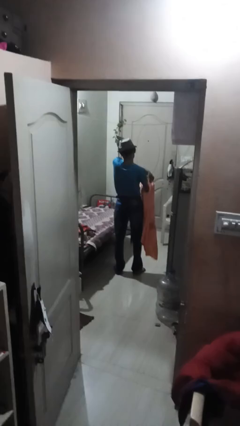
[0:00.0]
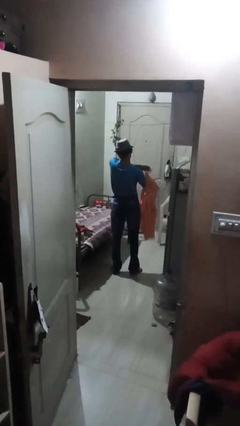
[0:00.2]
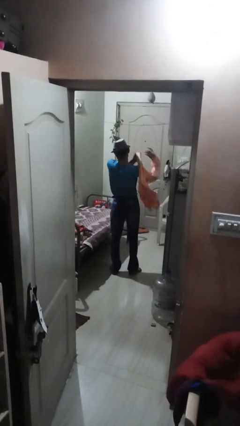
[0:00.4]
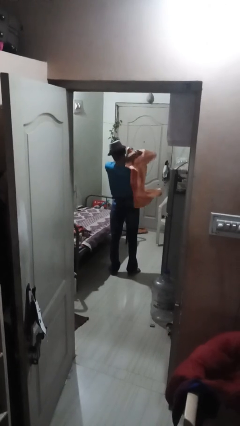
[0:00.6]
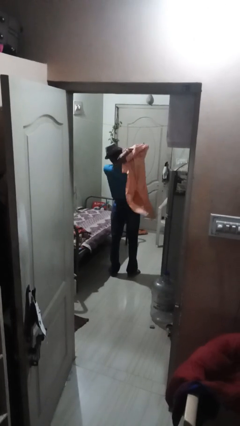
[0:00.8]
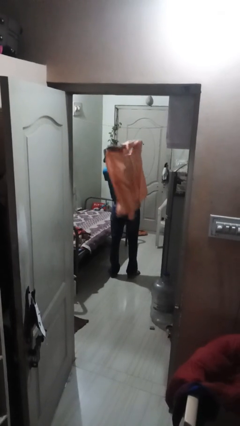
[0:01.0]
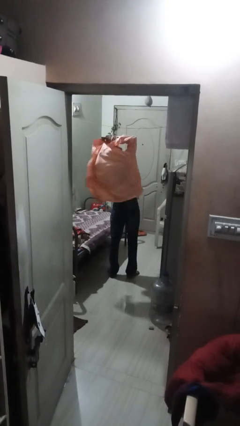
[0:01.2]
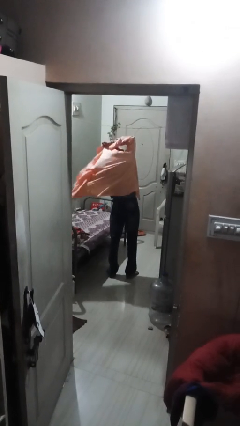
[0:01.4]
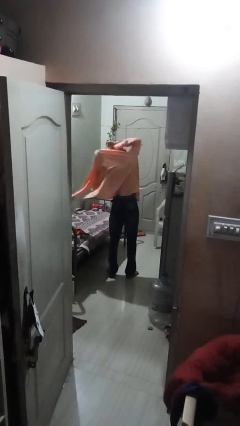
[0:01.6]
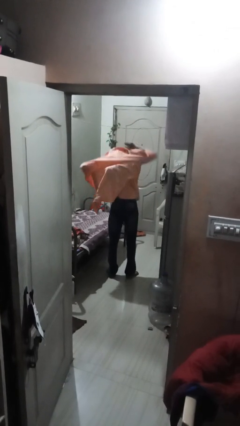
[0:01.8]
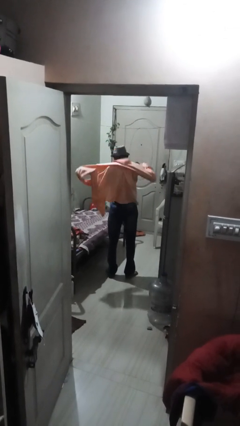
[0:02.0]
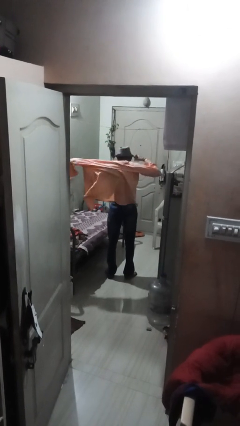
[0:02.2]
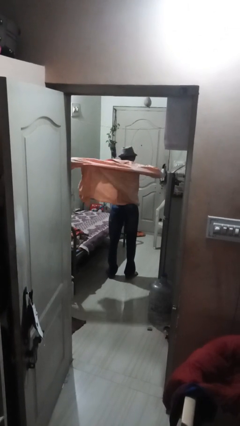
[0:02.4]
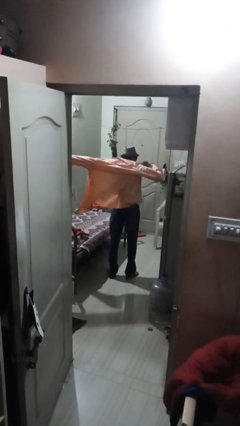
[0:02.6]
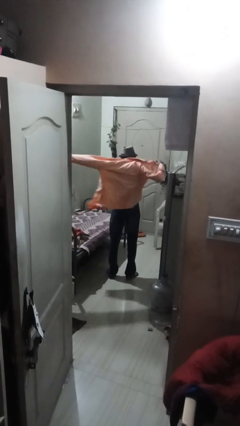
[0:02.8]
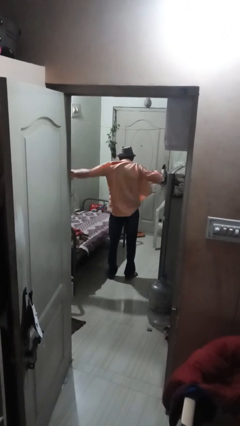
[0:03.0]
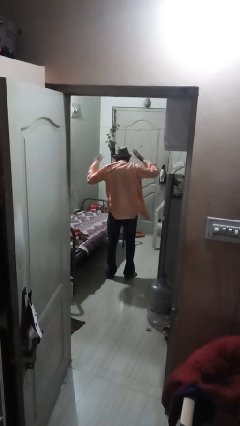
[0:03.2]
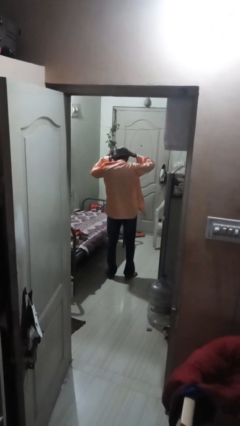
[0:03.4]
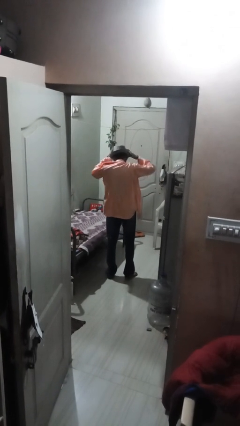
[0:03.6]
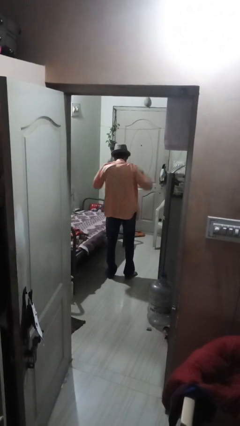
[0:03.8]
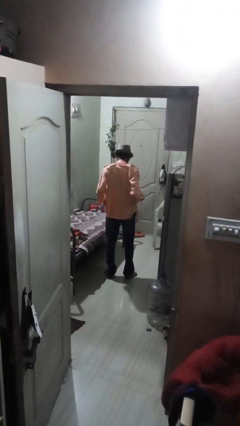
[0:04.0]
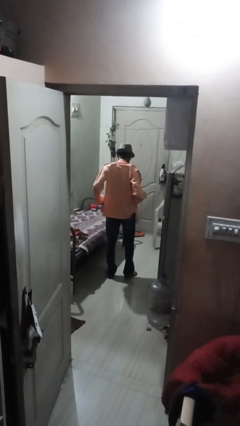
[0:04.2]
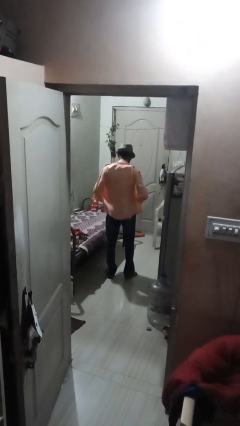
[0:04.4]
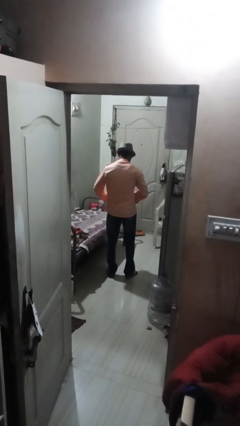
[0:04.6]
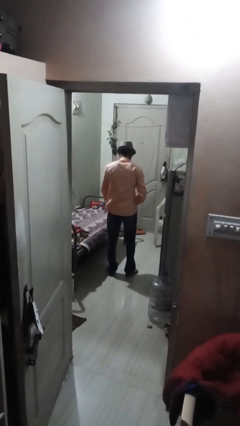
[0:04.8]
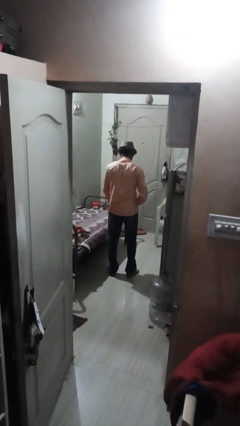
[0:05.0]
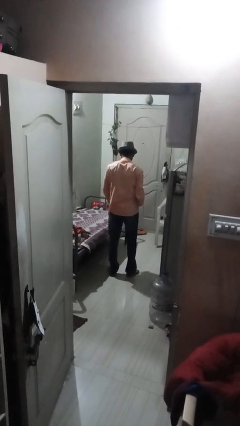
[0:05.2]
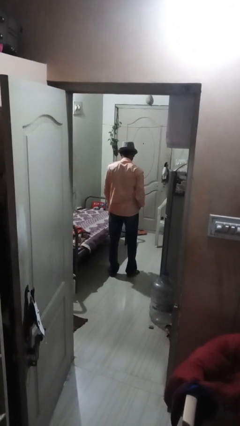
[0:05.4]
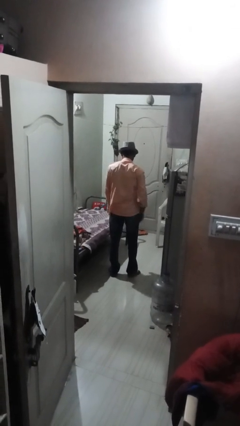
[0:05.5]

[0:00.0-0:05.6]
person puts on shirt

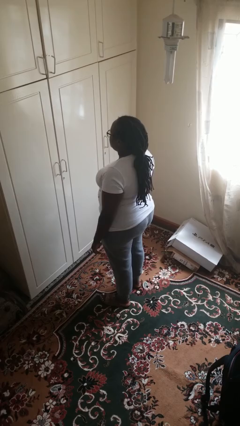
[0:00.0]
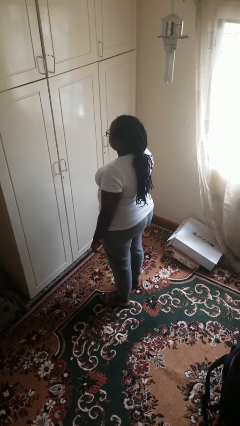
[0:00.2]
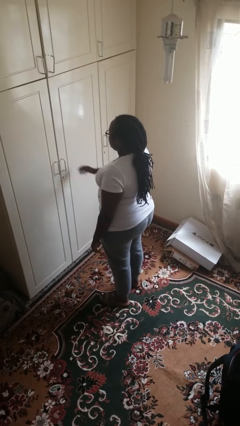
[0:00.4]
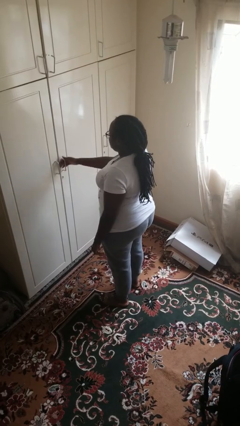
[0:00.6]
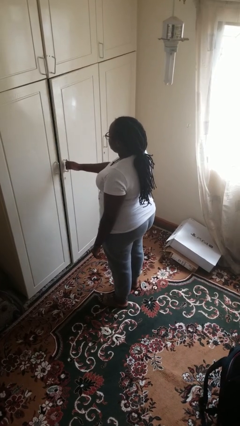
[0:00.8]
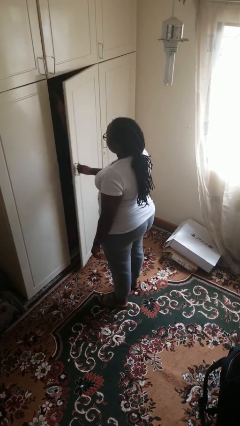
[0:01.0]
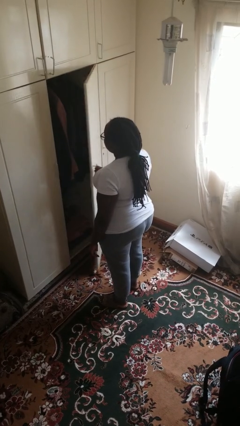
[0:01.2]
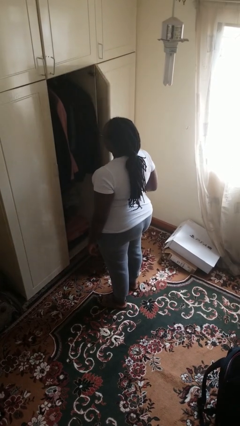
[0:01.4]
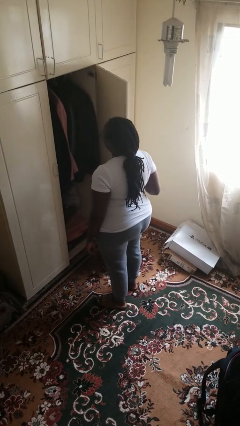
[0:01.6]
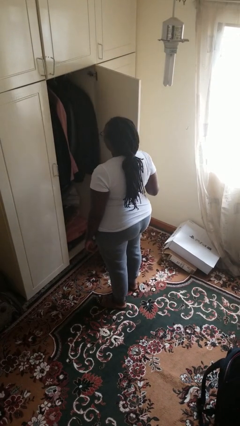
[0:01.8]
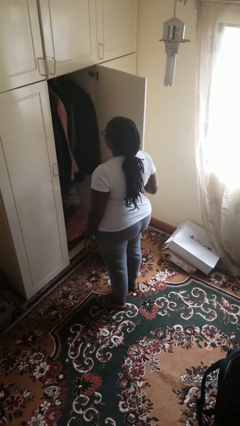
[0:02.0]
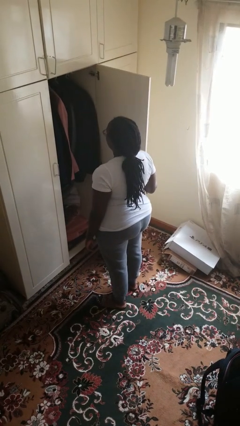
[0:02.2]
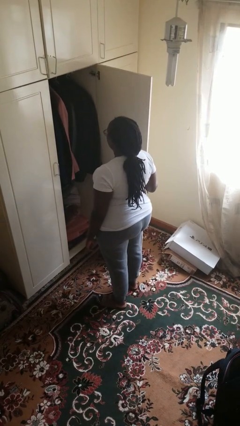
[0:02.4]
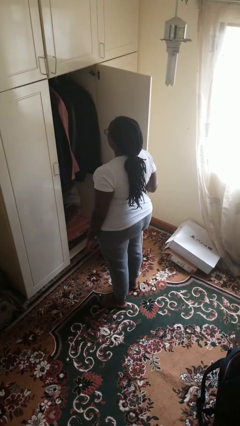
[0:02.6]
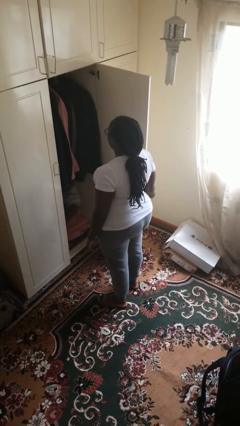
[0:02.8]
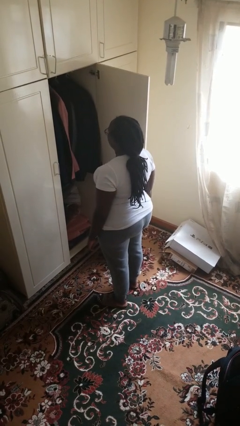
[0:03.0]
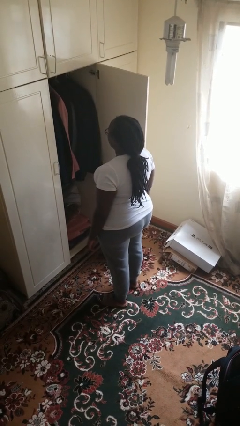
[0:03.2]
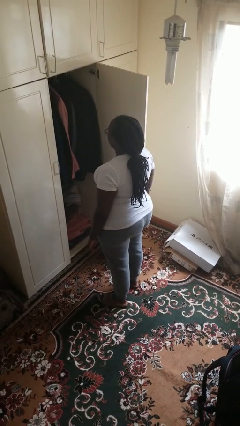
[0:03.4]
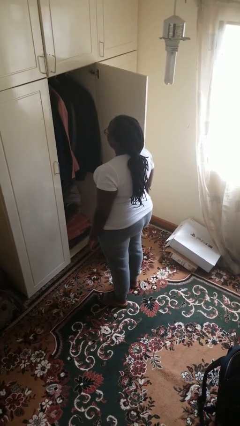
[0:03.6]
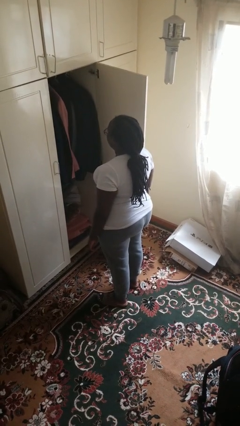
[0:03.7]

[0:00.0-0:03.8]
person opens closet door

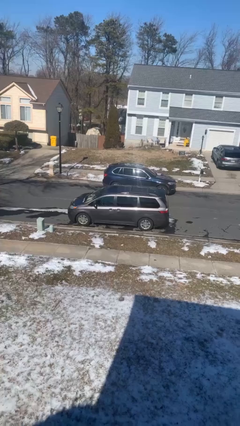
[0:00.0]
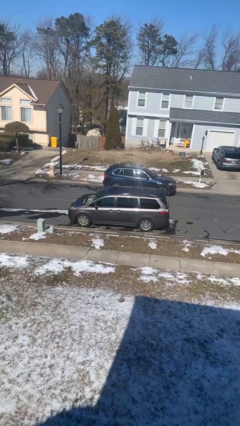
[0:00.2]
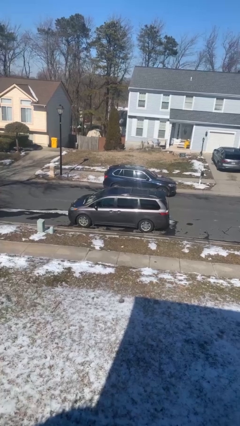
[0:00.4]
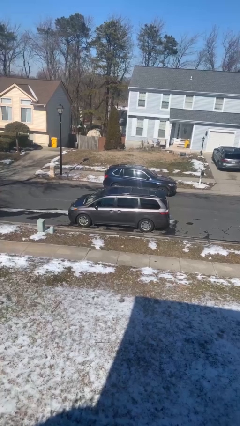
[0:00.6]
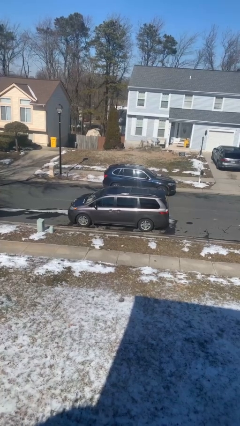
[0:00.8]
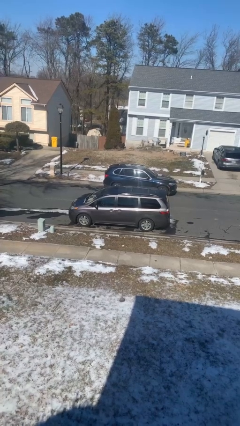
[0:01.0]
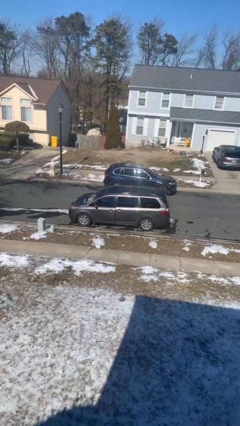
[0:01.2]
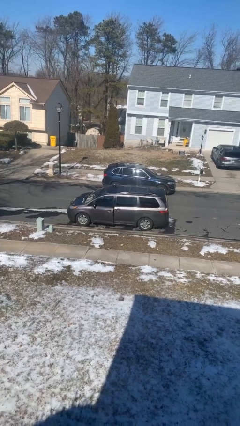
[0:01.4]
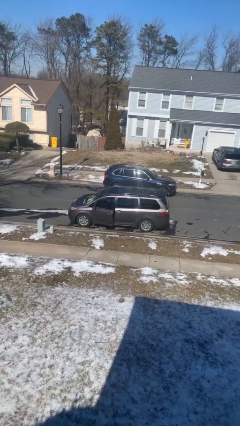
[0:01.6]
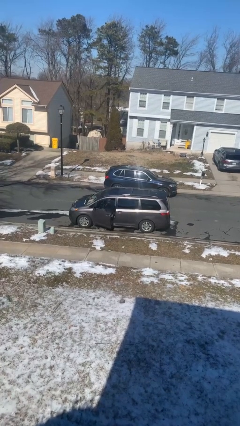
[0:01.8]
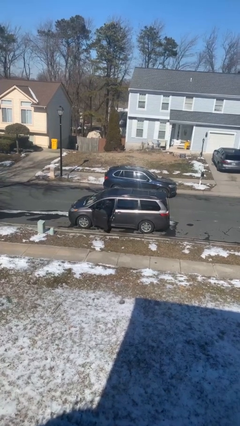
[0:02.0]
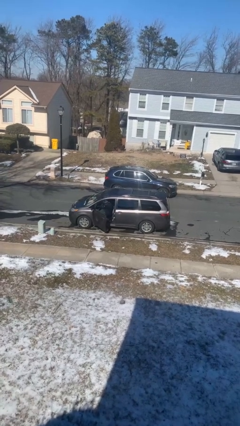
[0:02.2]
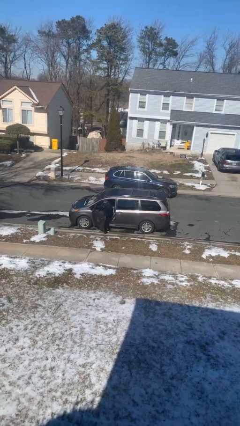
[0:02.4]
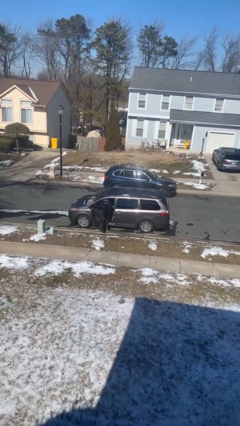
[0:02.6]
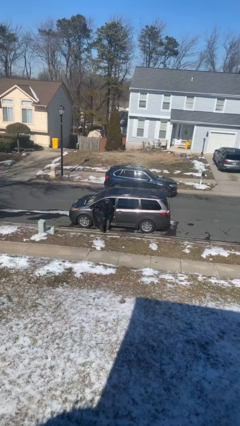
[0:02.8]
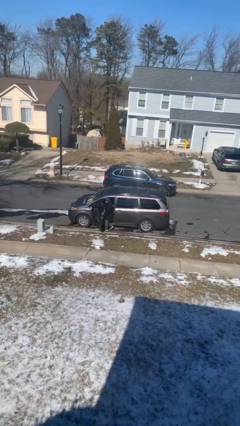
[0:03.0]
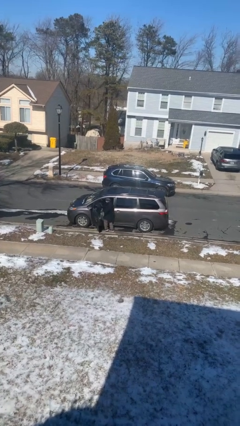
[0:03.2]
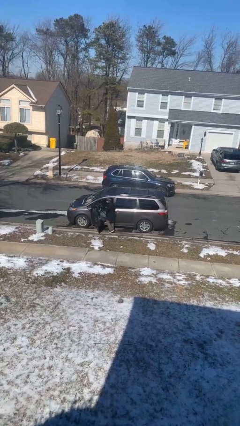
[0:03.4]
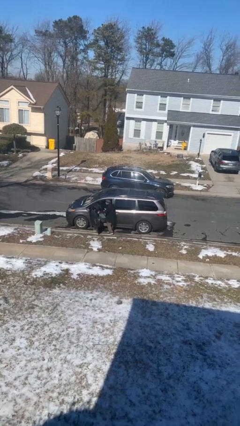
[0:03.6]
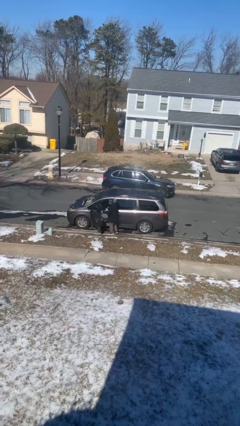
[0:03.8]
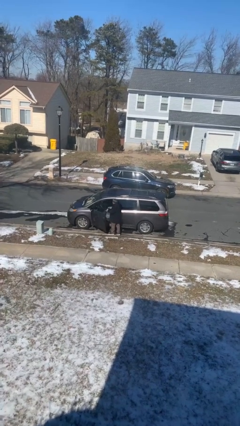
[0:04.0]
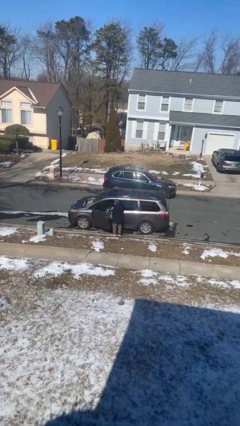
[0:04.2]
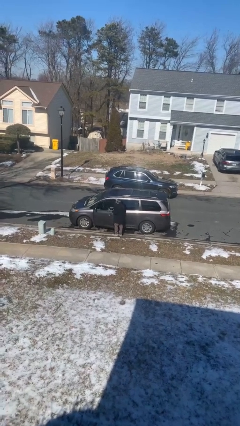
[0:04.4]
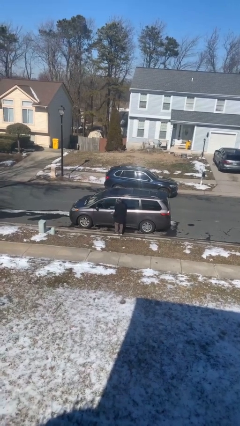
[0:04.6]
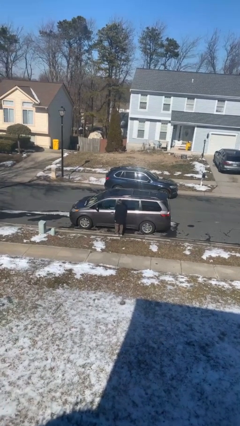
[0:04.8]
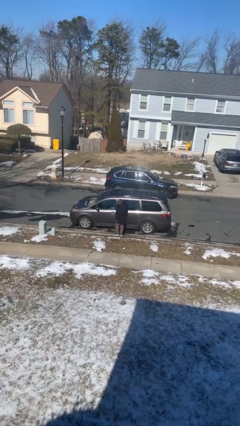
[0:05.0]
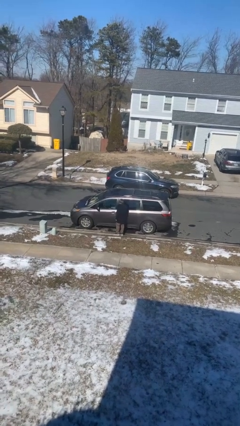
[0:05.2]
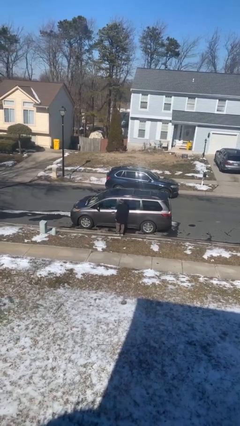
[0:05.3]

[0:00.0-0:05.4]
car drops off person

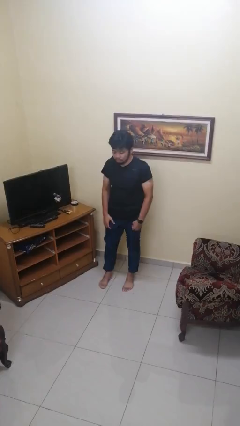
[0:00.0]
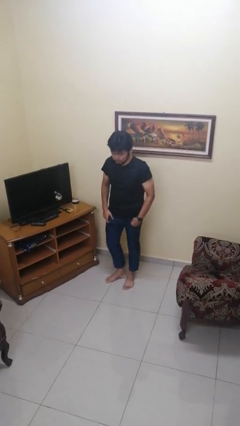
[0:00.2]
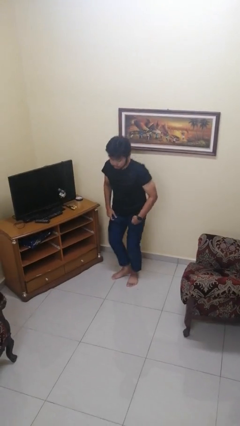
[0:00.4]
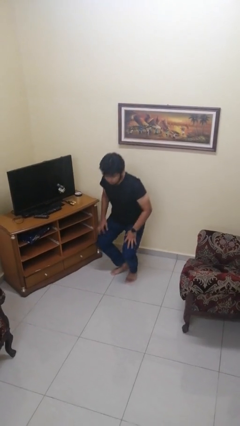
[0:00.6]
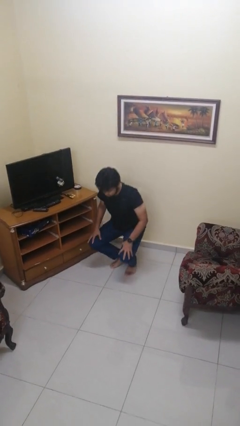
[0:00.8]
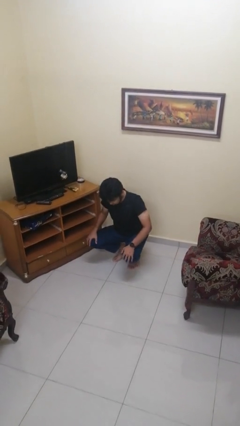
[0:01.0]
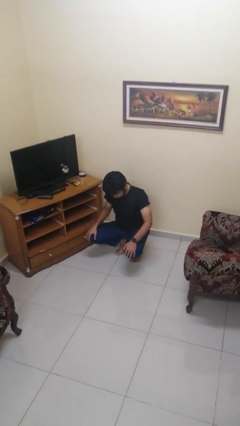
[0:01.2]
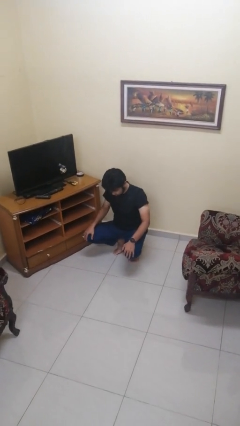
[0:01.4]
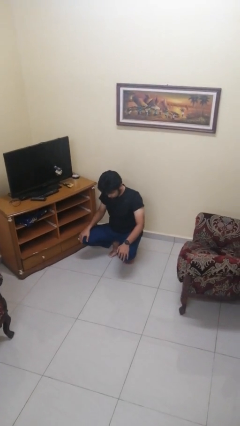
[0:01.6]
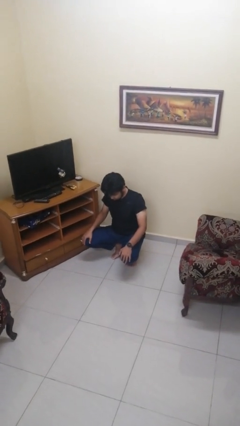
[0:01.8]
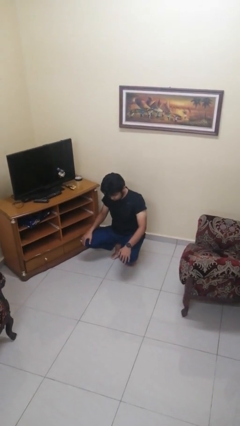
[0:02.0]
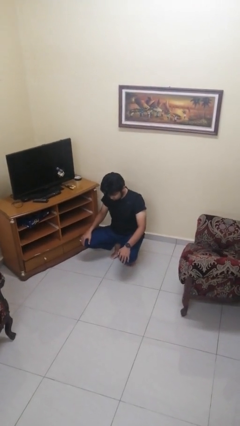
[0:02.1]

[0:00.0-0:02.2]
person squats

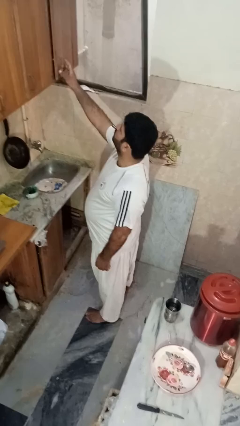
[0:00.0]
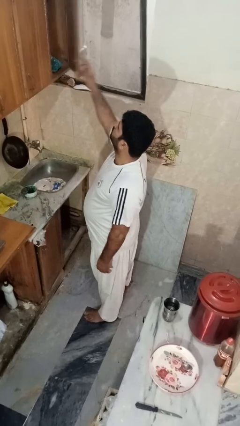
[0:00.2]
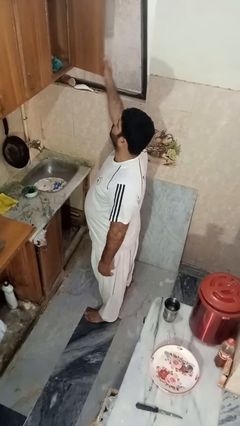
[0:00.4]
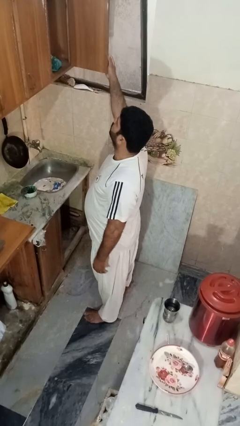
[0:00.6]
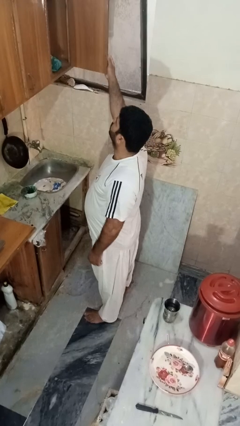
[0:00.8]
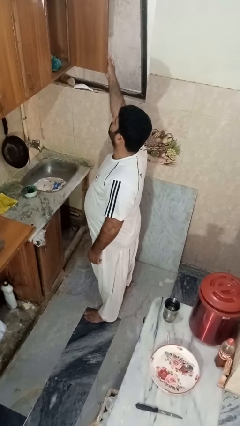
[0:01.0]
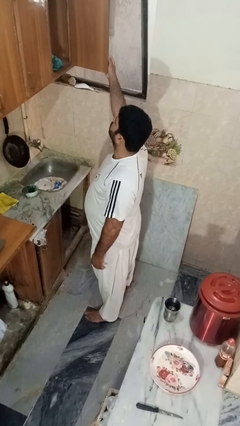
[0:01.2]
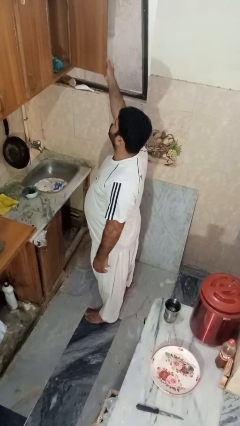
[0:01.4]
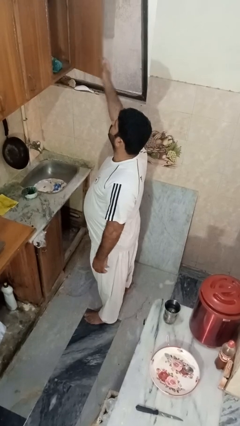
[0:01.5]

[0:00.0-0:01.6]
person opens cabinet
